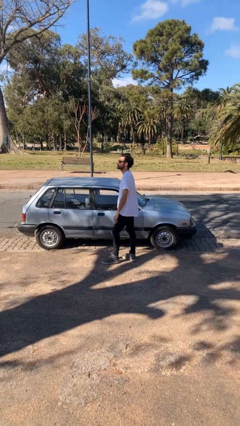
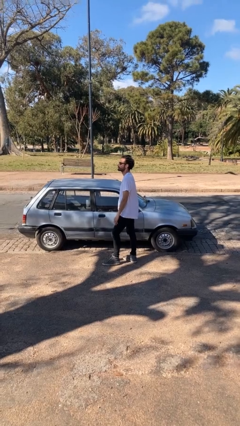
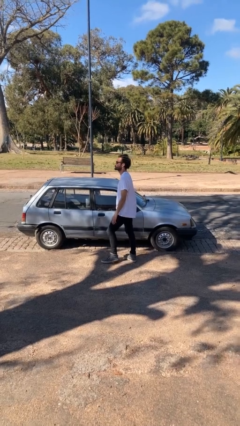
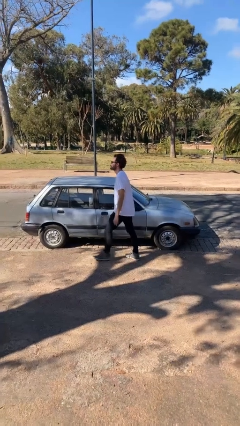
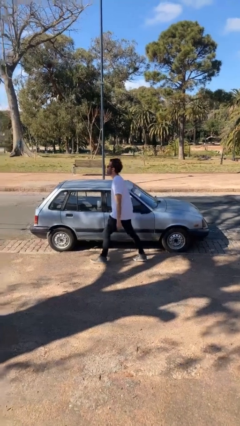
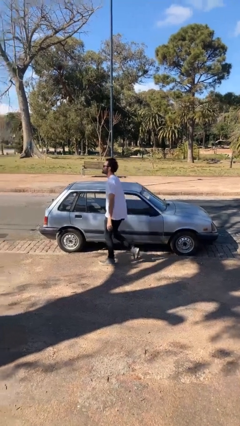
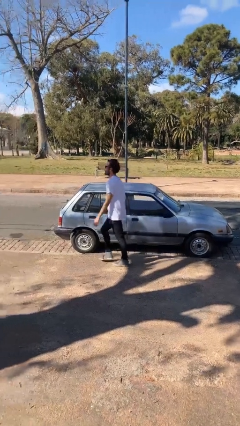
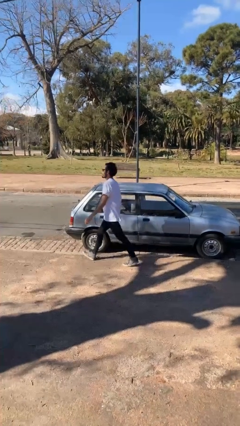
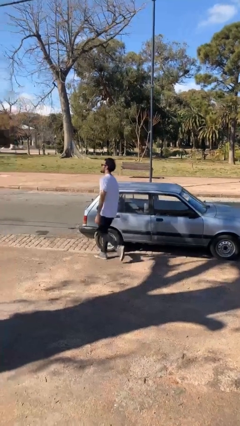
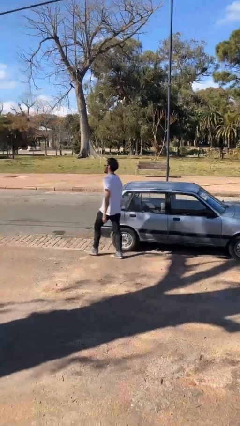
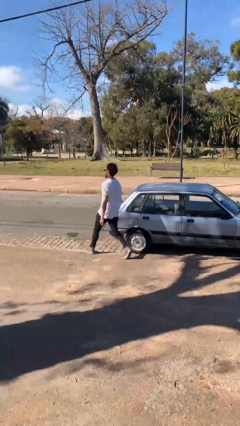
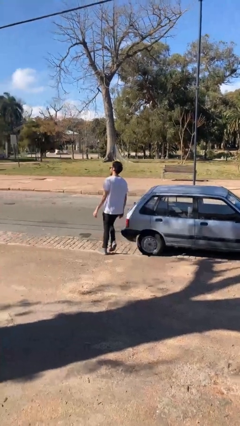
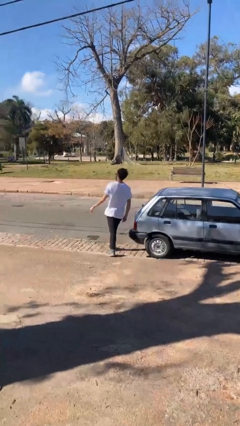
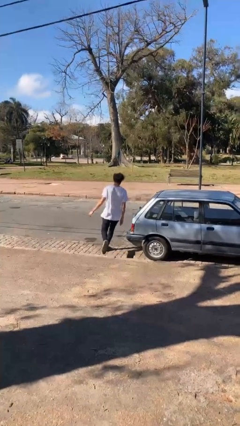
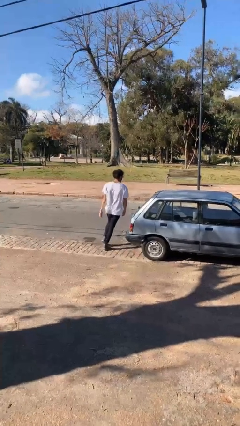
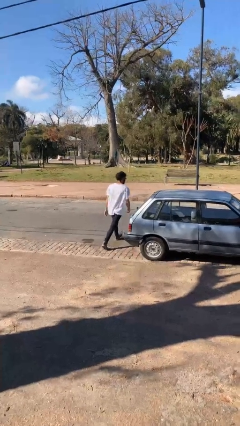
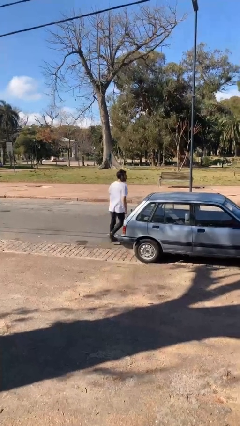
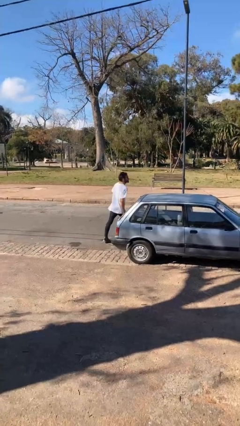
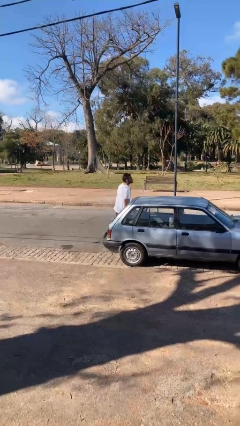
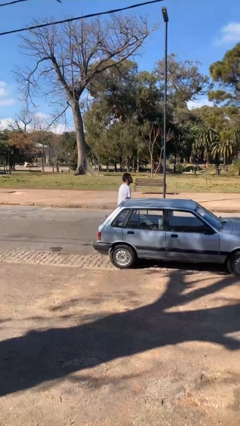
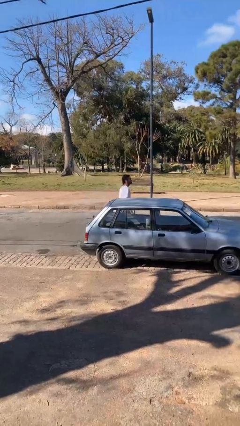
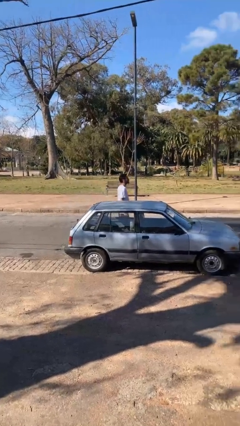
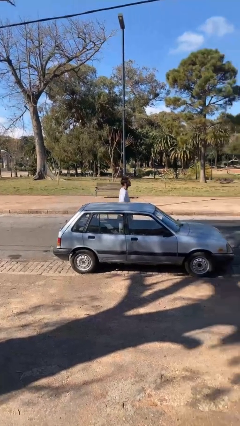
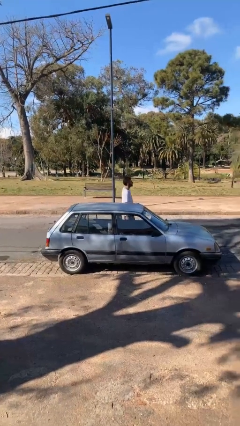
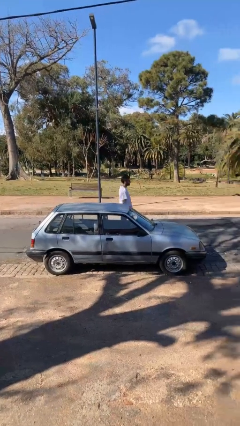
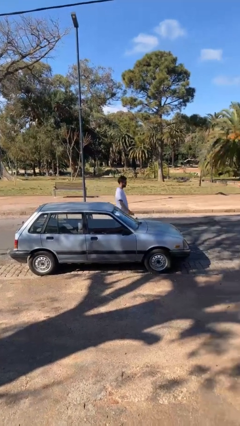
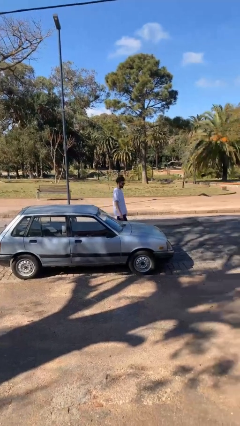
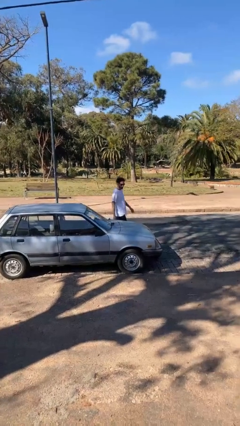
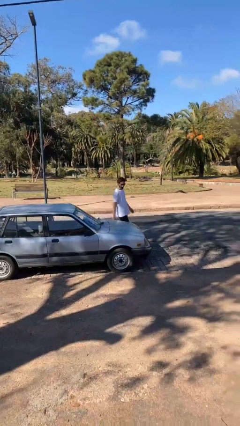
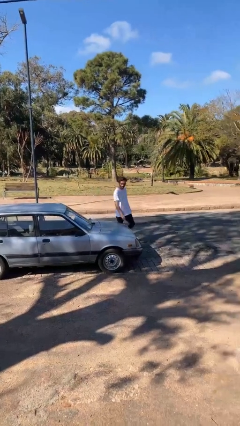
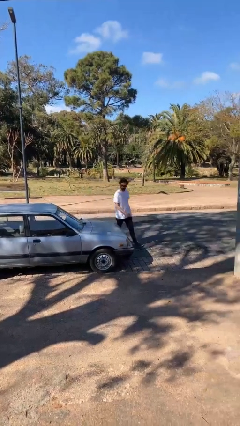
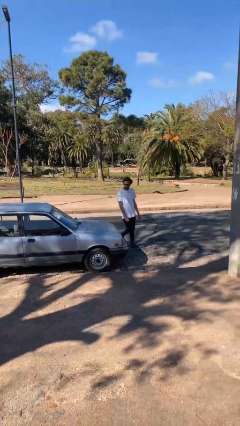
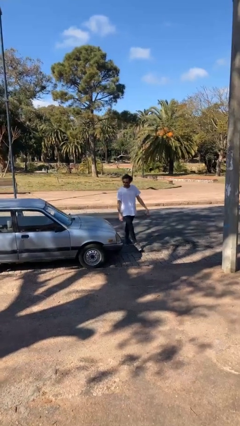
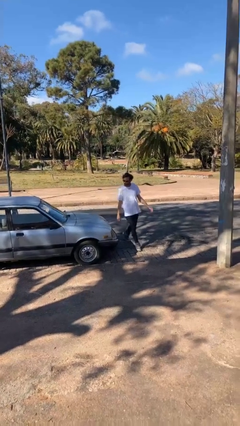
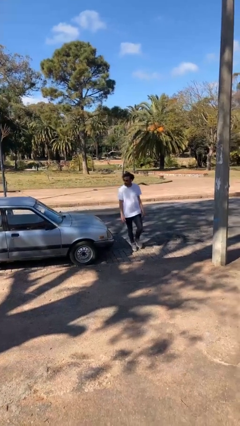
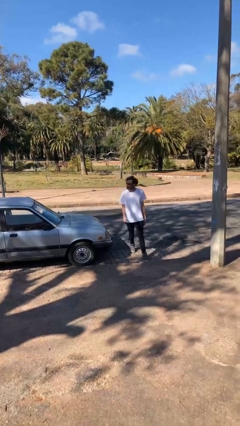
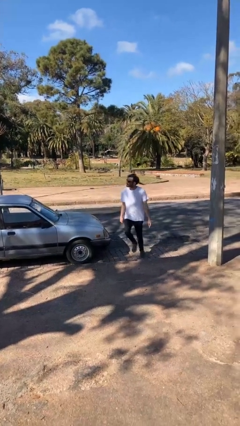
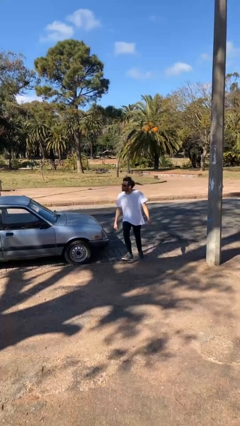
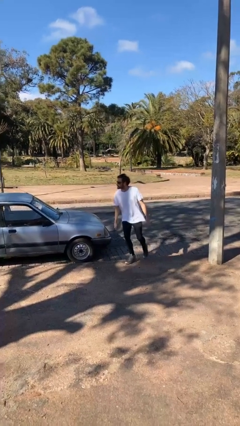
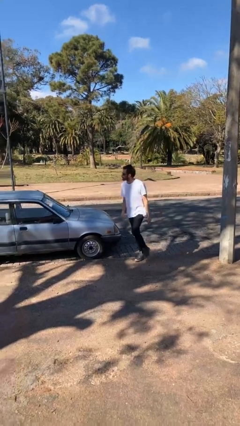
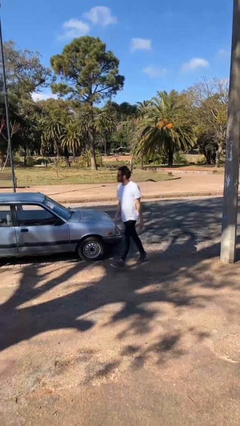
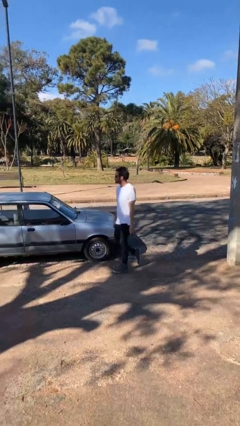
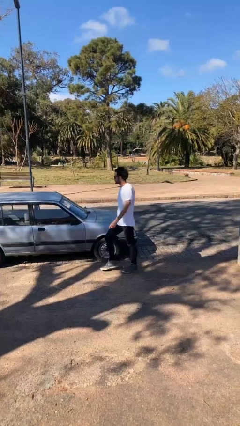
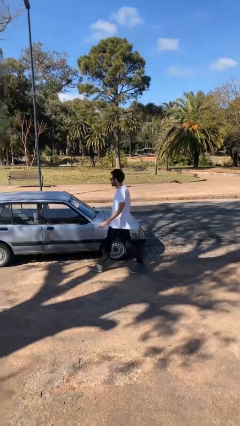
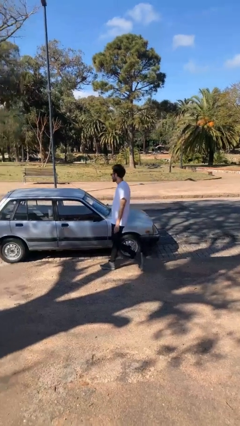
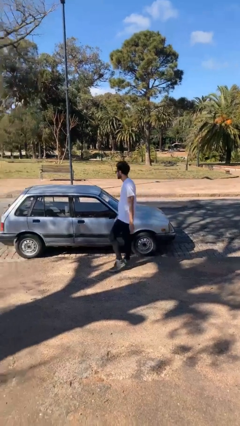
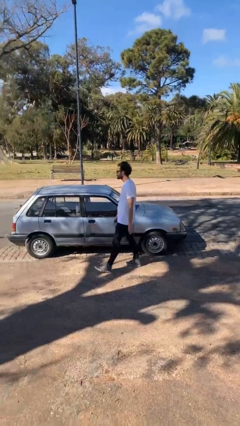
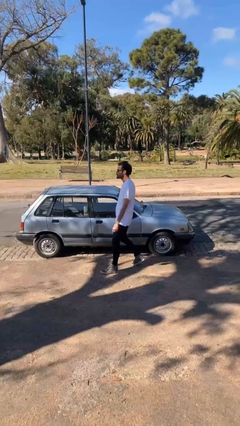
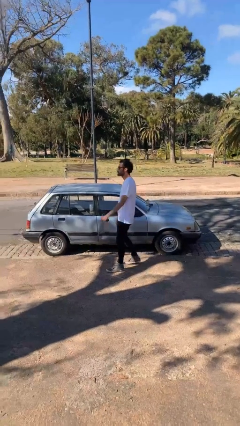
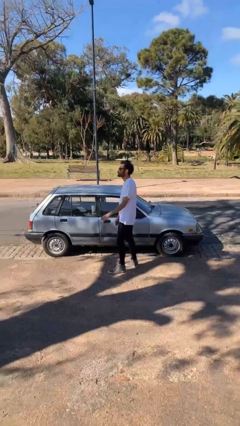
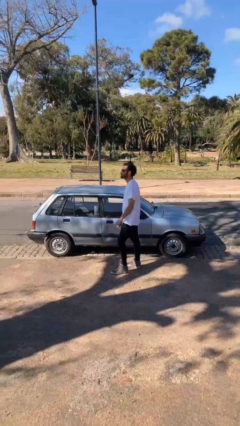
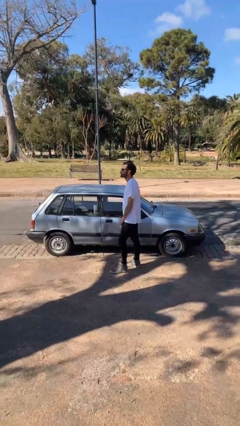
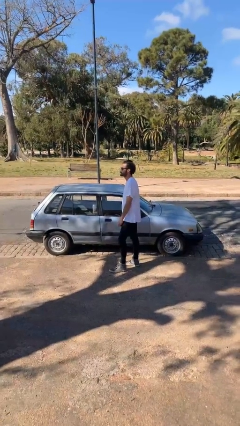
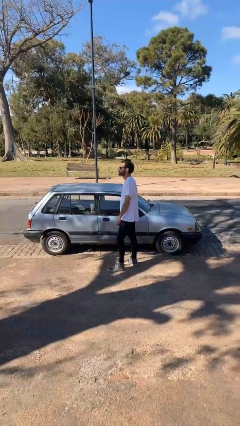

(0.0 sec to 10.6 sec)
person walks around car

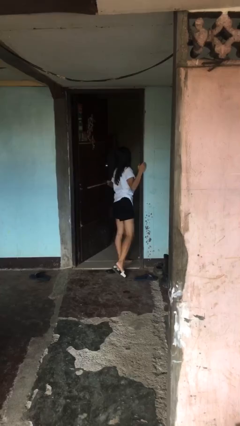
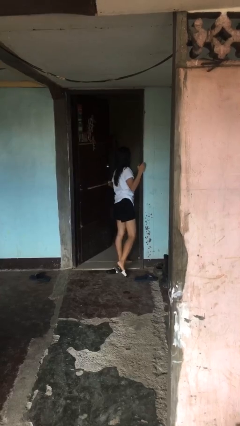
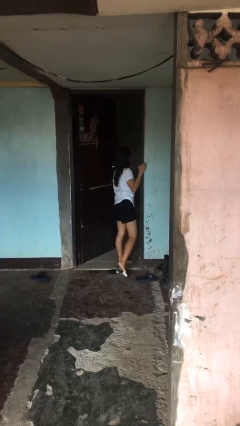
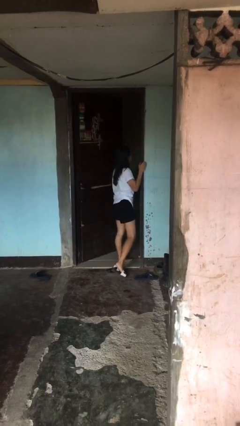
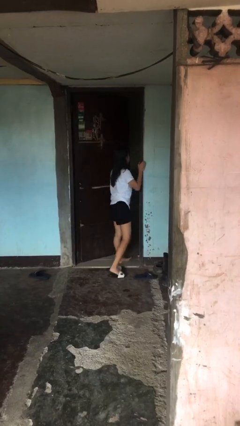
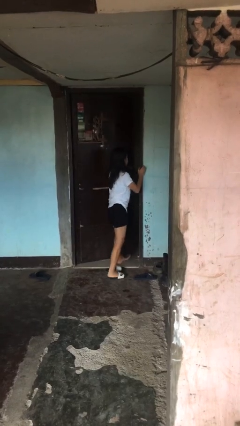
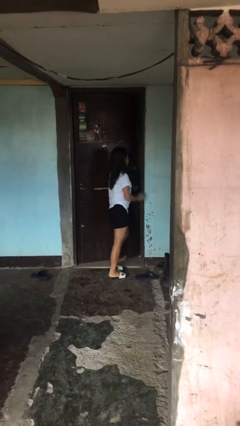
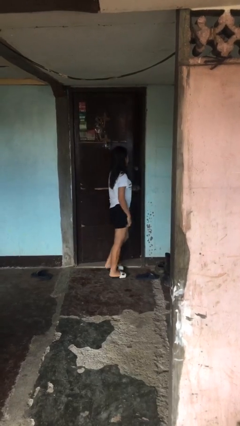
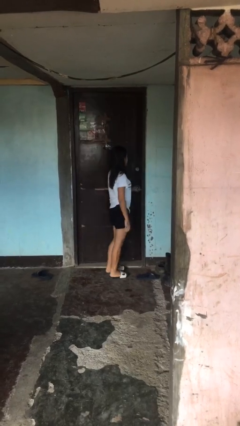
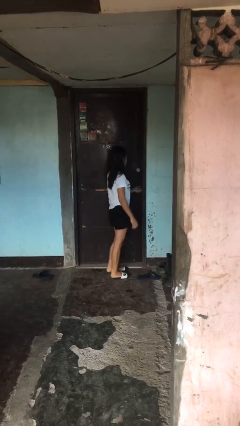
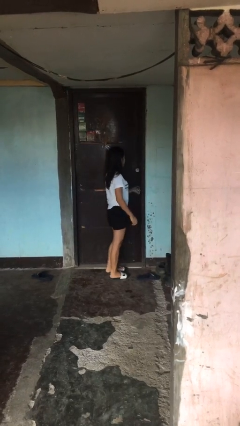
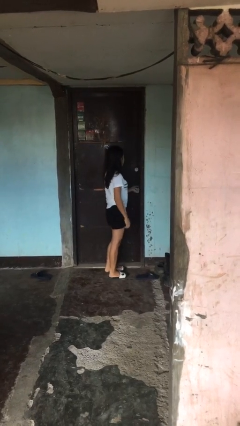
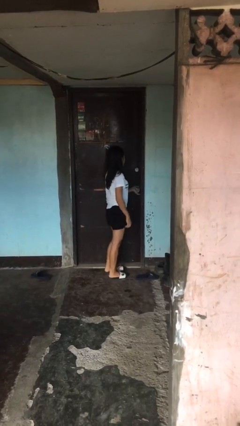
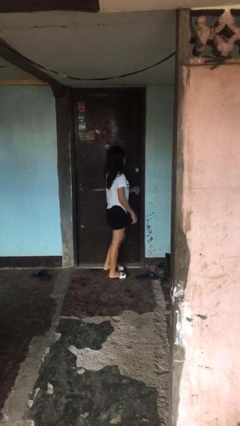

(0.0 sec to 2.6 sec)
person closes facility door

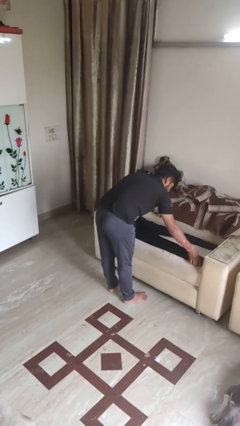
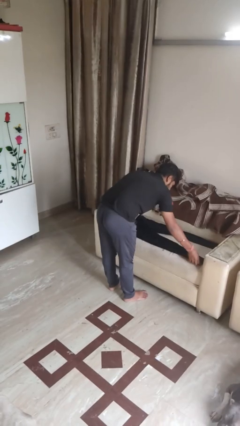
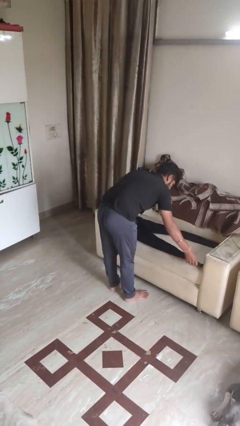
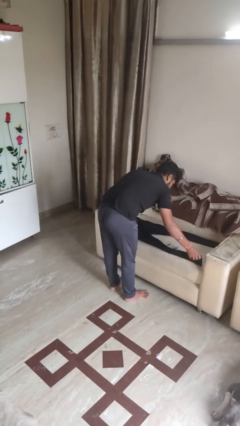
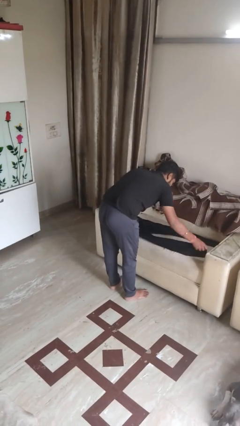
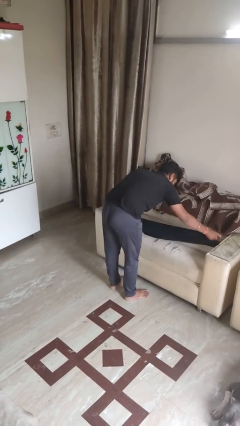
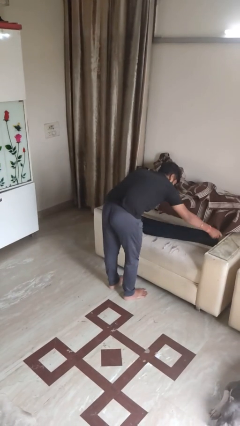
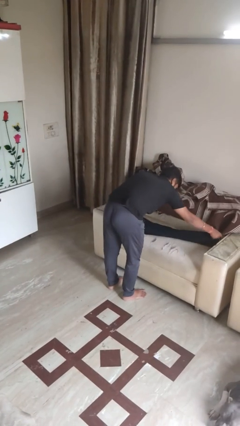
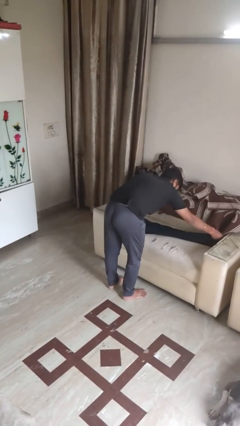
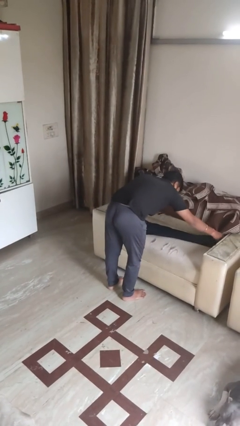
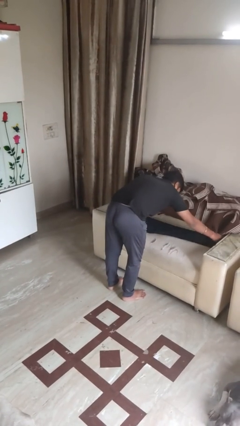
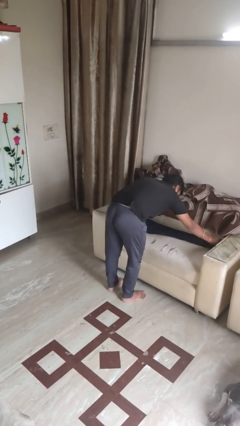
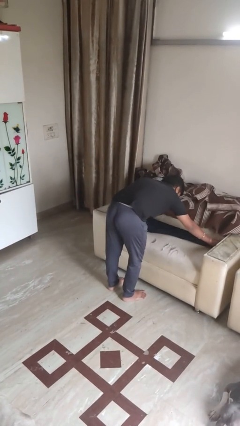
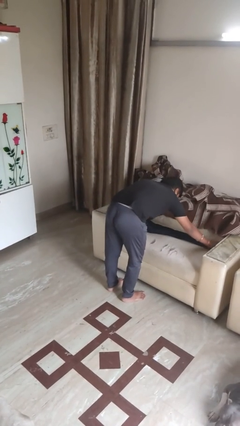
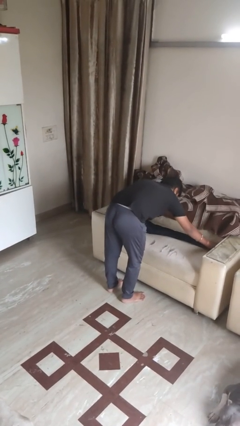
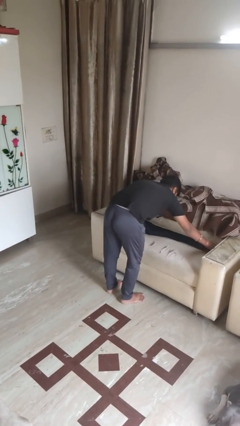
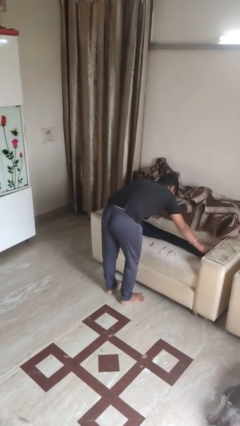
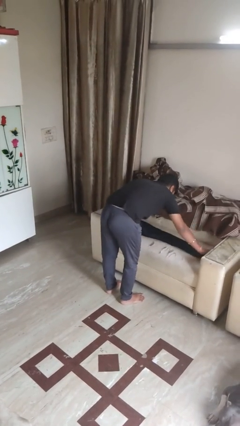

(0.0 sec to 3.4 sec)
person folds pants

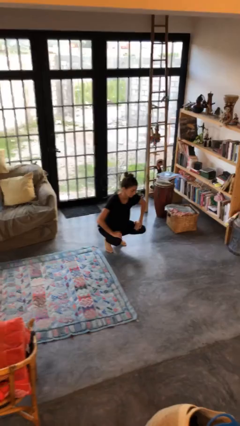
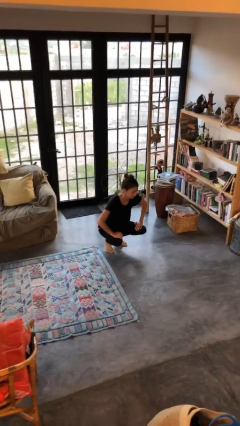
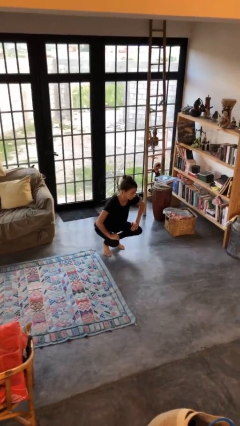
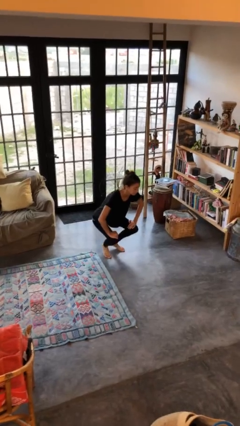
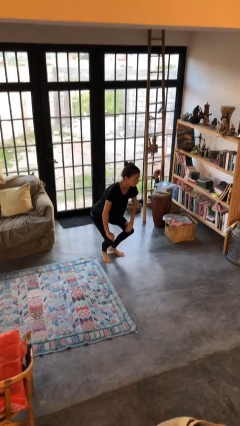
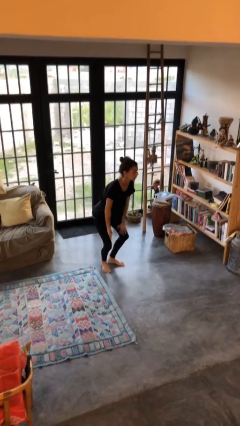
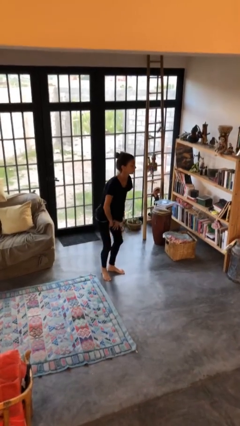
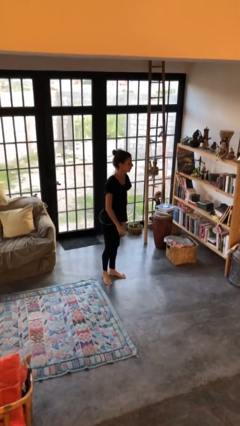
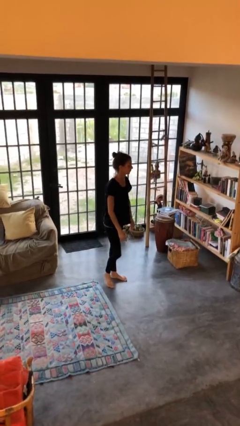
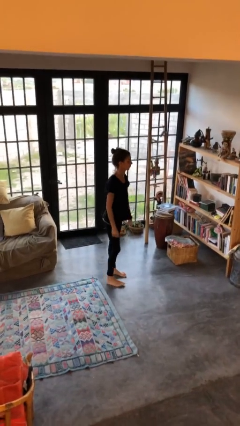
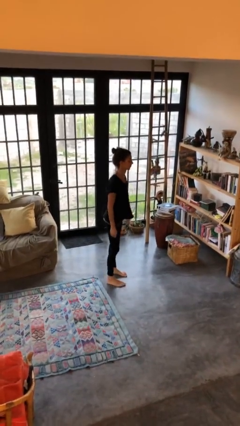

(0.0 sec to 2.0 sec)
person stands up
